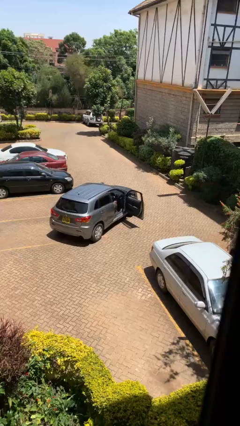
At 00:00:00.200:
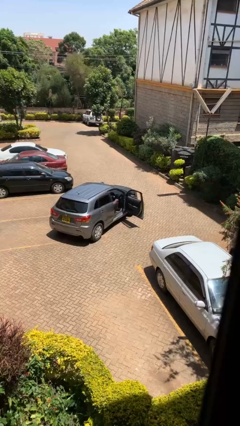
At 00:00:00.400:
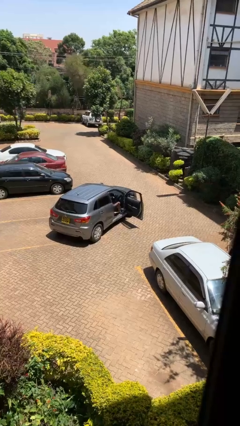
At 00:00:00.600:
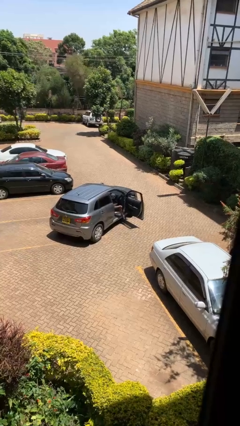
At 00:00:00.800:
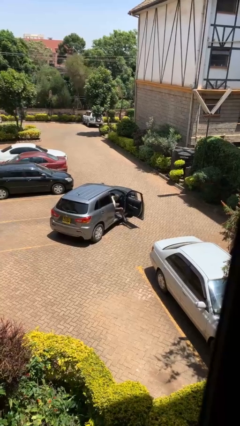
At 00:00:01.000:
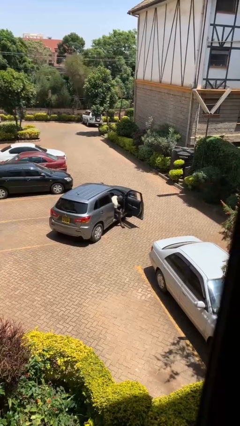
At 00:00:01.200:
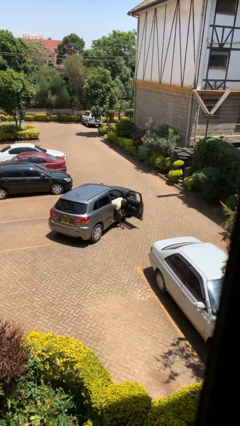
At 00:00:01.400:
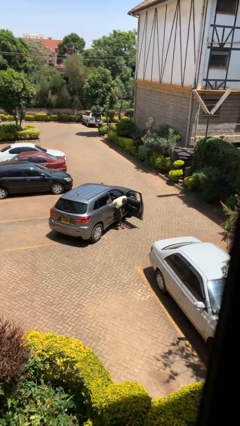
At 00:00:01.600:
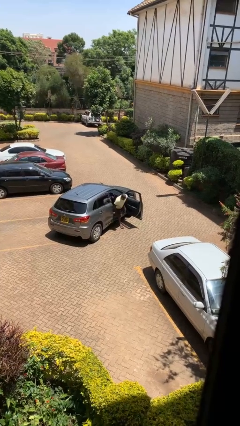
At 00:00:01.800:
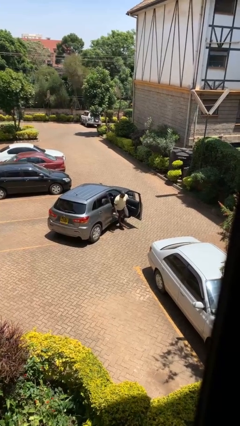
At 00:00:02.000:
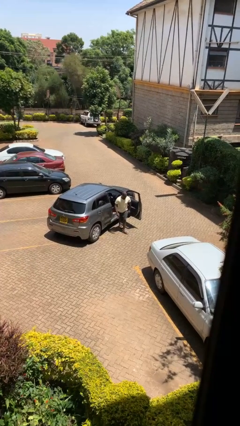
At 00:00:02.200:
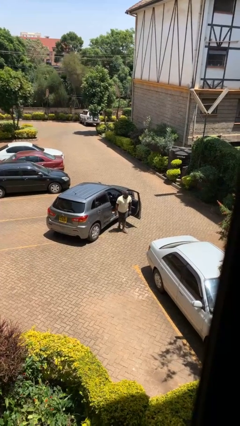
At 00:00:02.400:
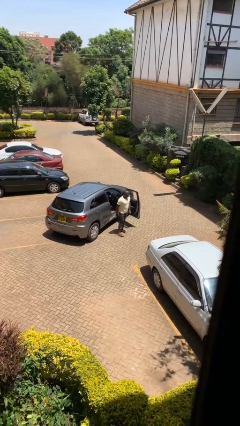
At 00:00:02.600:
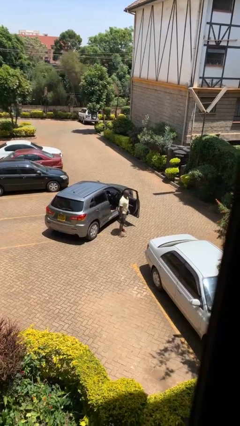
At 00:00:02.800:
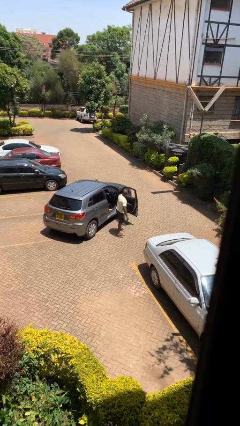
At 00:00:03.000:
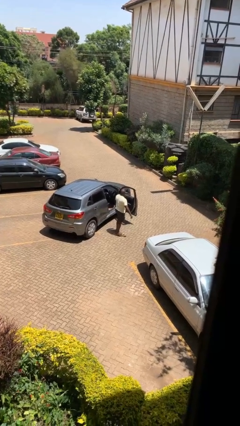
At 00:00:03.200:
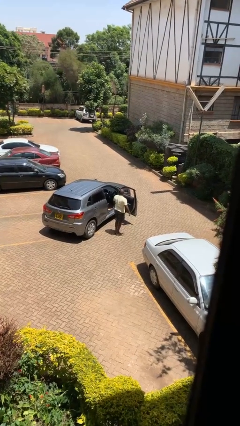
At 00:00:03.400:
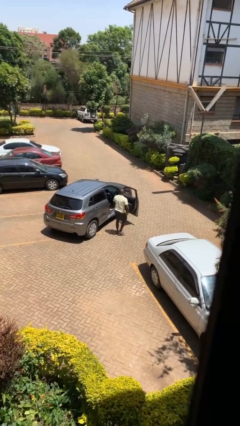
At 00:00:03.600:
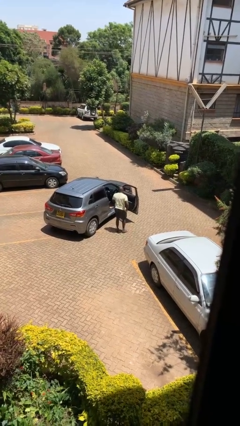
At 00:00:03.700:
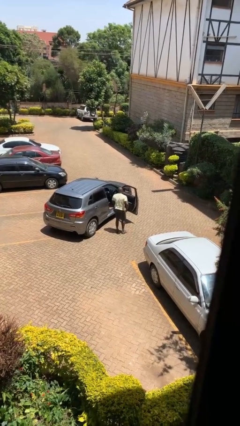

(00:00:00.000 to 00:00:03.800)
person exits car

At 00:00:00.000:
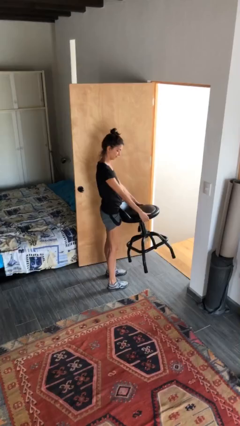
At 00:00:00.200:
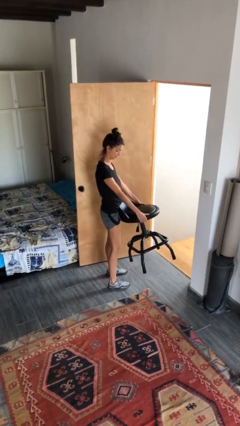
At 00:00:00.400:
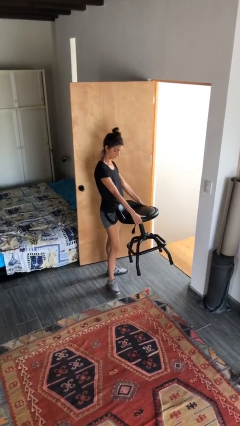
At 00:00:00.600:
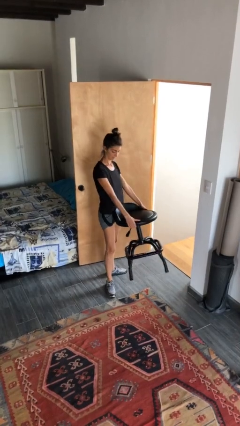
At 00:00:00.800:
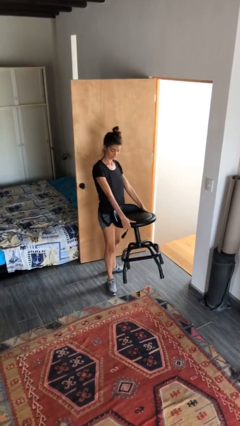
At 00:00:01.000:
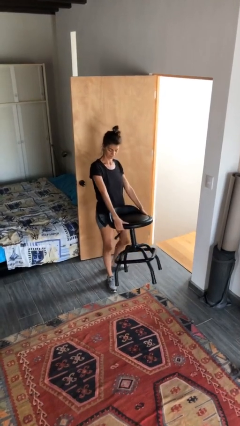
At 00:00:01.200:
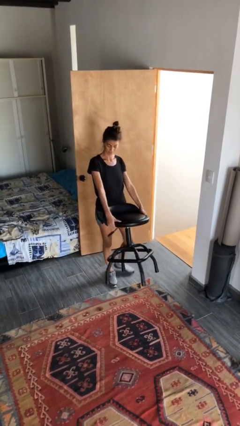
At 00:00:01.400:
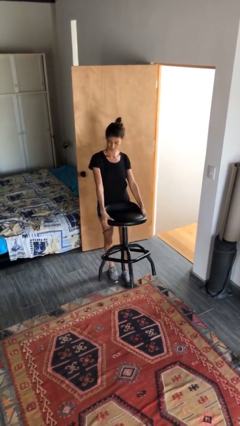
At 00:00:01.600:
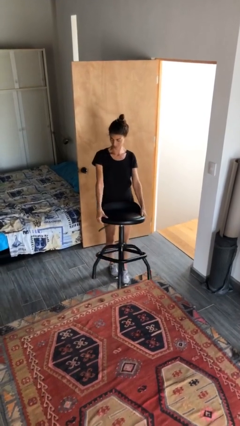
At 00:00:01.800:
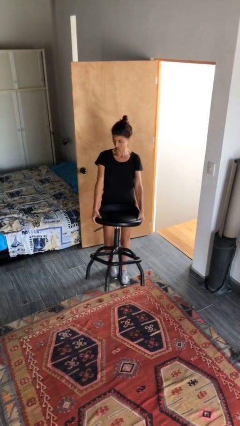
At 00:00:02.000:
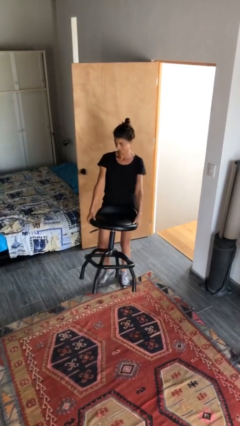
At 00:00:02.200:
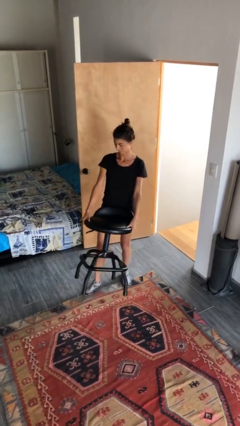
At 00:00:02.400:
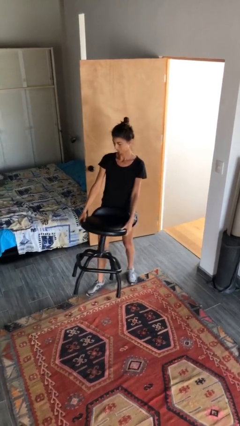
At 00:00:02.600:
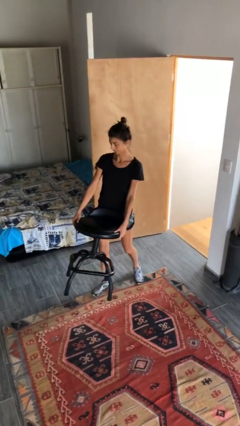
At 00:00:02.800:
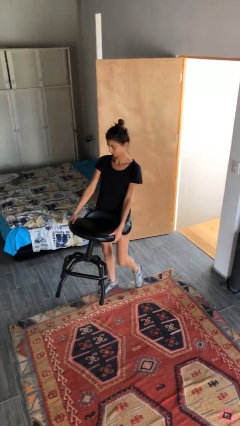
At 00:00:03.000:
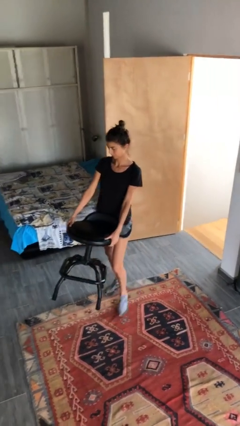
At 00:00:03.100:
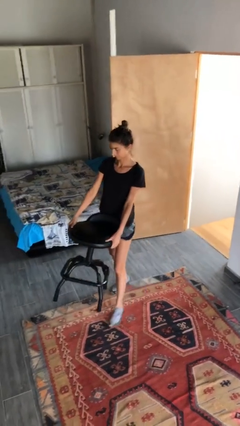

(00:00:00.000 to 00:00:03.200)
person carries furniture

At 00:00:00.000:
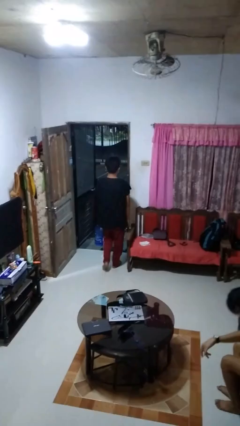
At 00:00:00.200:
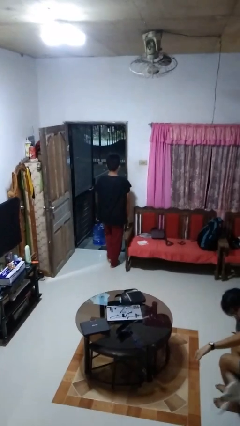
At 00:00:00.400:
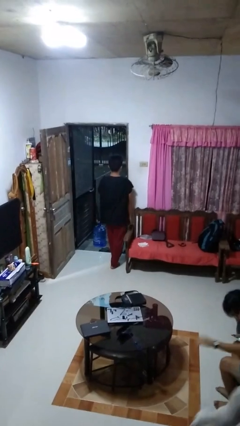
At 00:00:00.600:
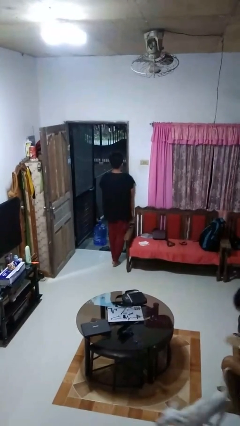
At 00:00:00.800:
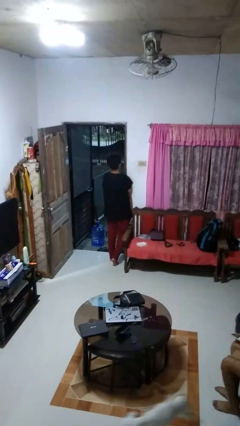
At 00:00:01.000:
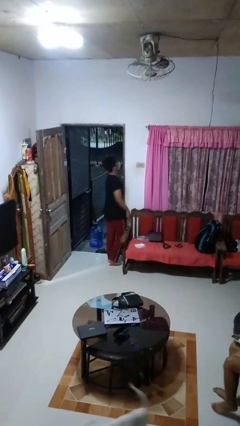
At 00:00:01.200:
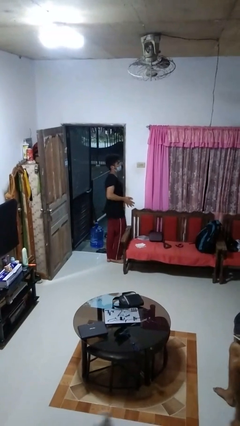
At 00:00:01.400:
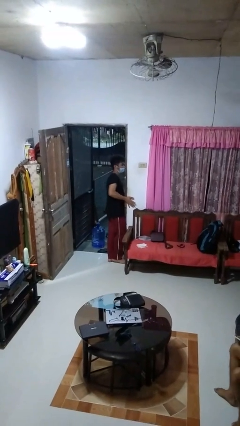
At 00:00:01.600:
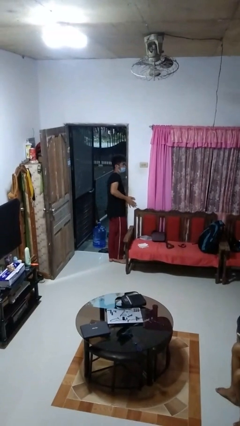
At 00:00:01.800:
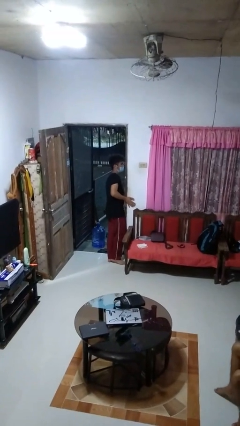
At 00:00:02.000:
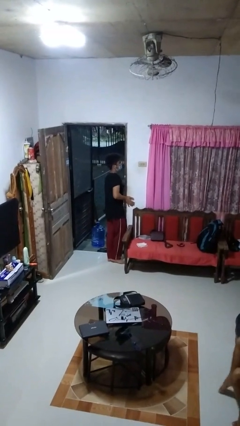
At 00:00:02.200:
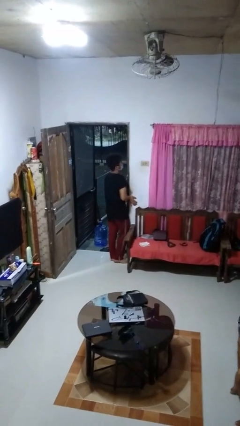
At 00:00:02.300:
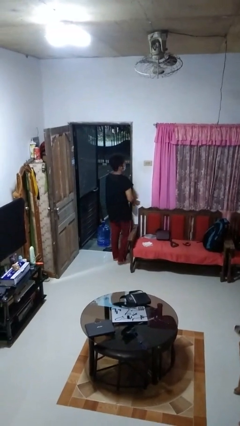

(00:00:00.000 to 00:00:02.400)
person bumps into wall

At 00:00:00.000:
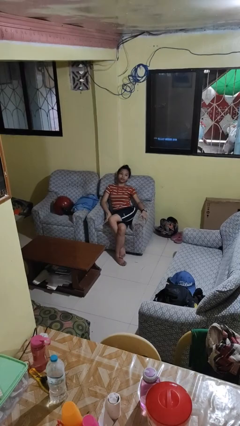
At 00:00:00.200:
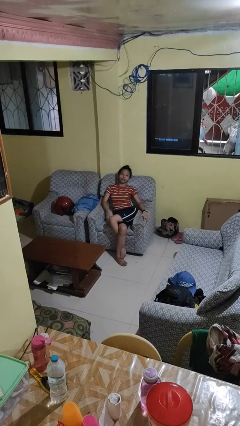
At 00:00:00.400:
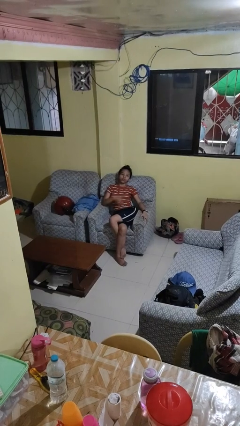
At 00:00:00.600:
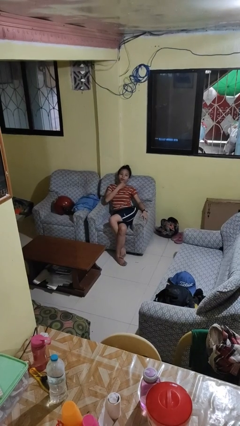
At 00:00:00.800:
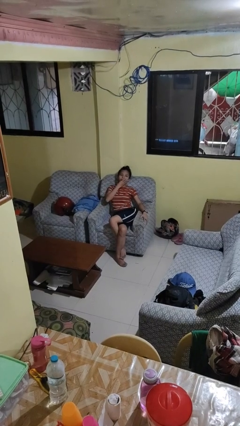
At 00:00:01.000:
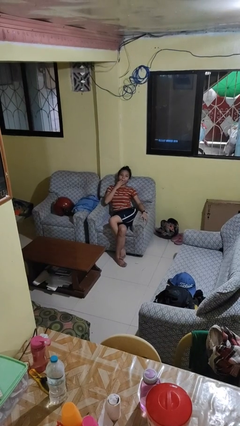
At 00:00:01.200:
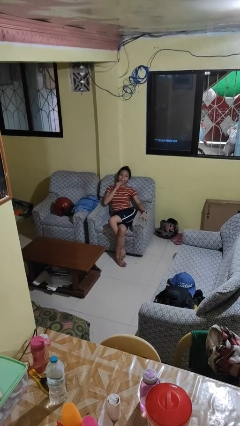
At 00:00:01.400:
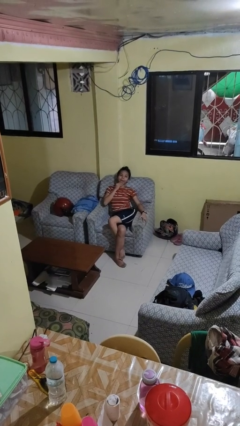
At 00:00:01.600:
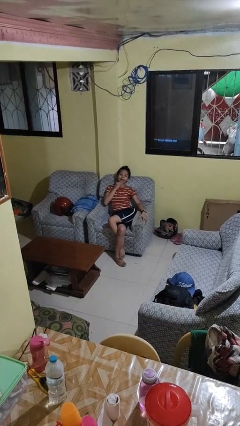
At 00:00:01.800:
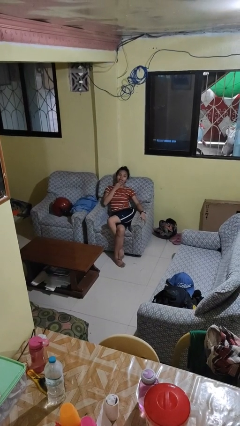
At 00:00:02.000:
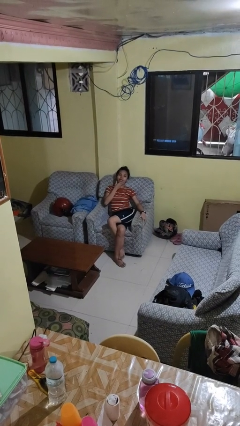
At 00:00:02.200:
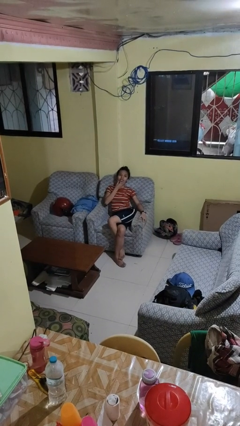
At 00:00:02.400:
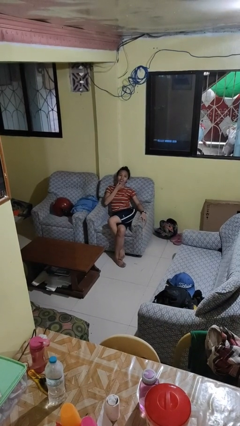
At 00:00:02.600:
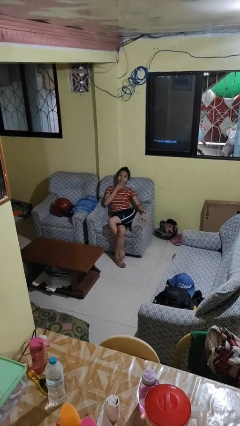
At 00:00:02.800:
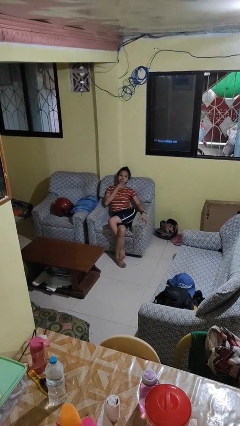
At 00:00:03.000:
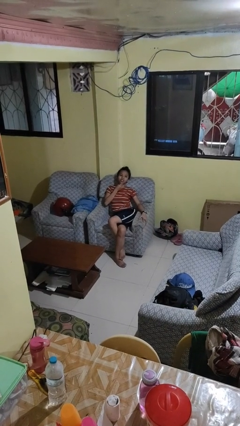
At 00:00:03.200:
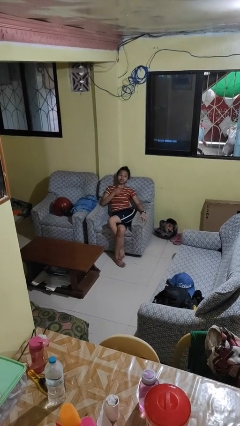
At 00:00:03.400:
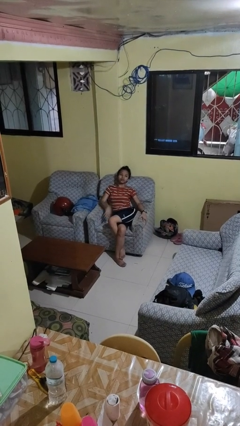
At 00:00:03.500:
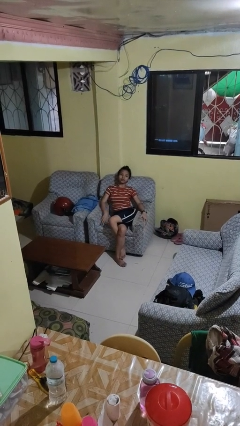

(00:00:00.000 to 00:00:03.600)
person strokes chin

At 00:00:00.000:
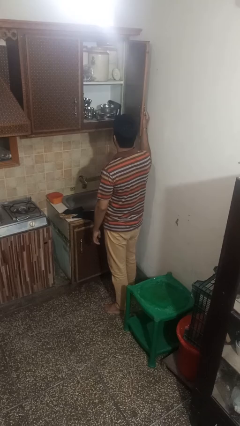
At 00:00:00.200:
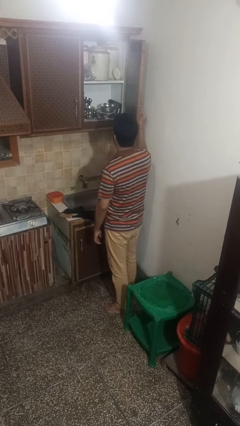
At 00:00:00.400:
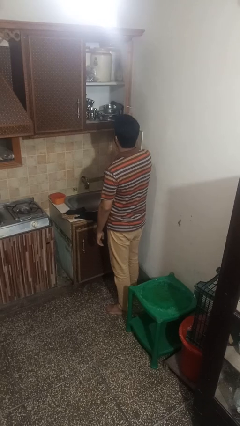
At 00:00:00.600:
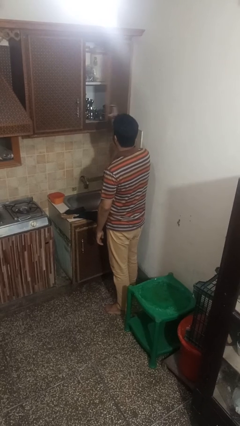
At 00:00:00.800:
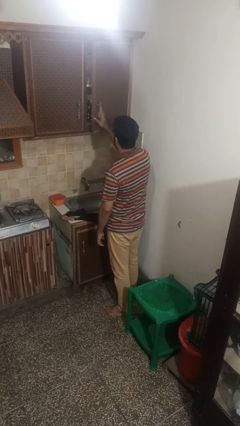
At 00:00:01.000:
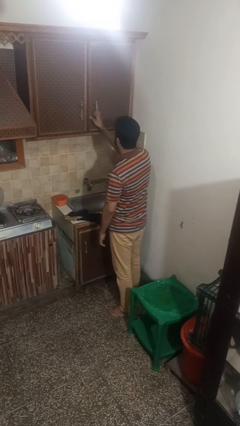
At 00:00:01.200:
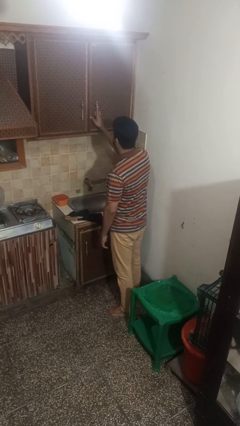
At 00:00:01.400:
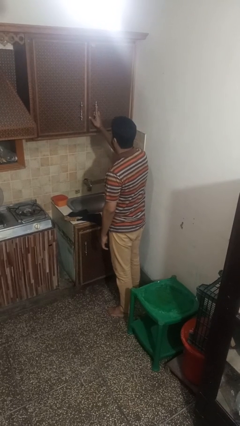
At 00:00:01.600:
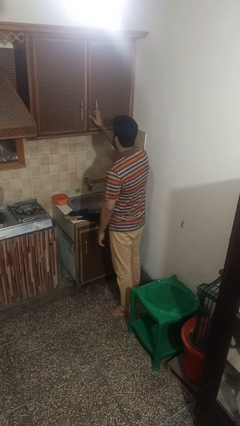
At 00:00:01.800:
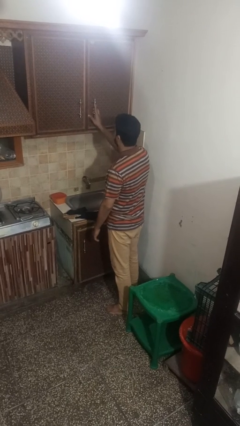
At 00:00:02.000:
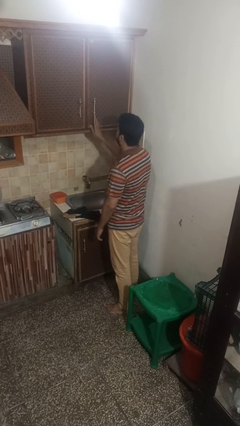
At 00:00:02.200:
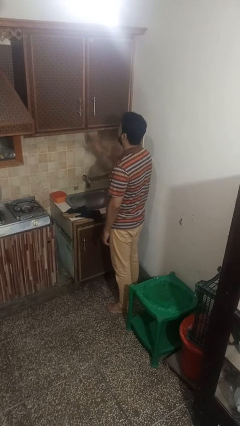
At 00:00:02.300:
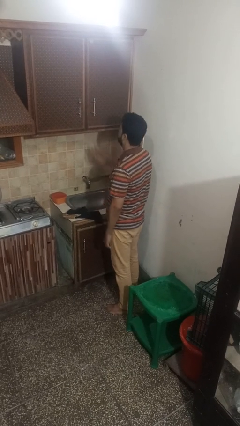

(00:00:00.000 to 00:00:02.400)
person closes cabinet

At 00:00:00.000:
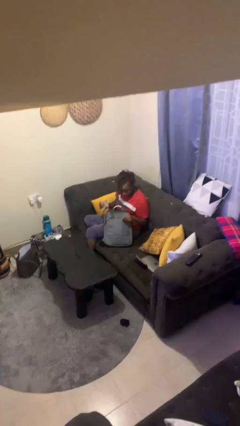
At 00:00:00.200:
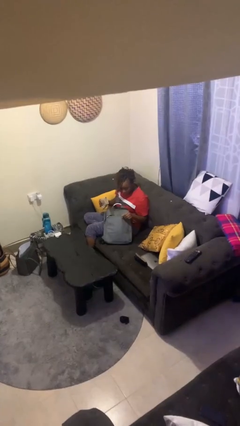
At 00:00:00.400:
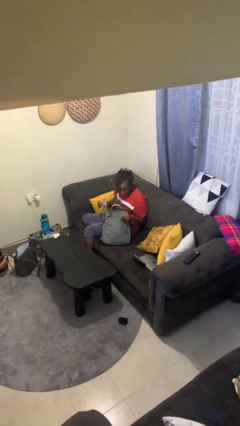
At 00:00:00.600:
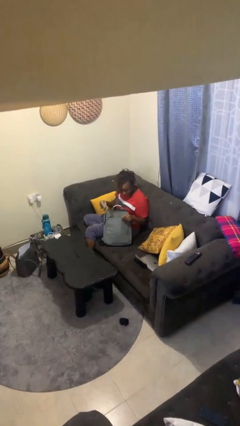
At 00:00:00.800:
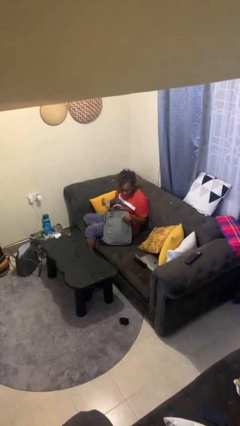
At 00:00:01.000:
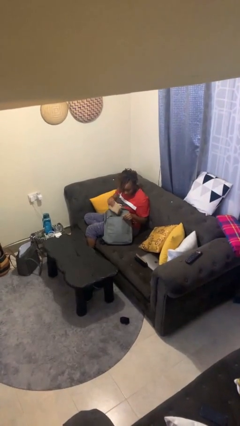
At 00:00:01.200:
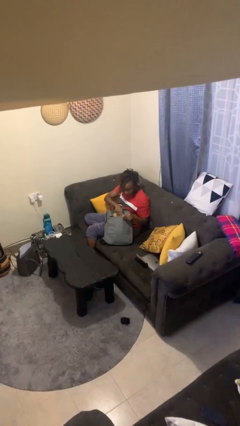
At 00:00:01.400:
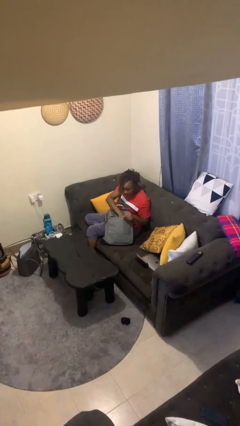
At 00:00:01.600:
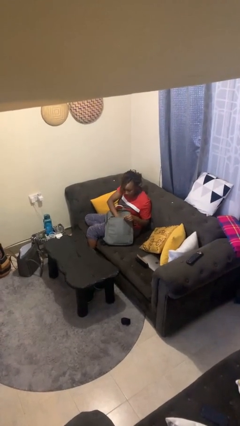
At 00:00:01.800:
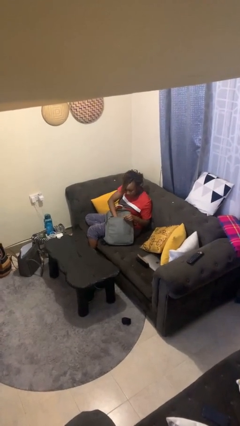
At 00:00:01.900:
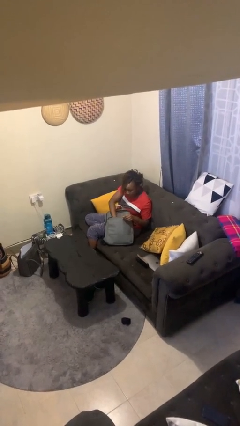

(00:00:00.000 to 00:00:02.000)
person puts object into backpack
